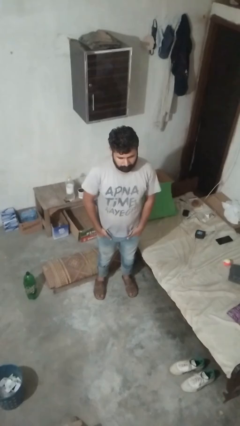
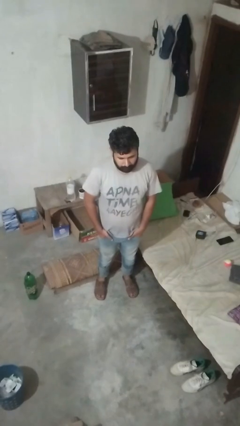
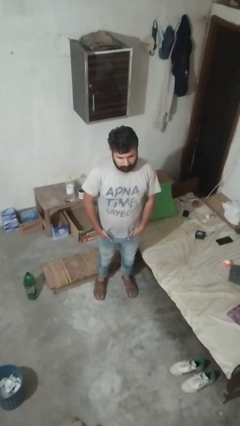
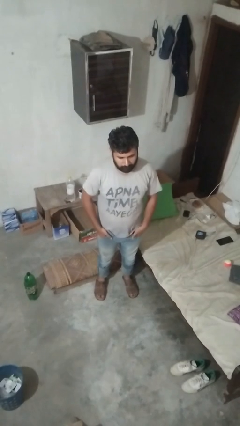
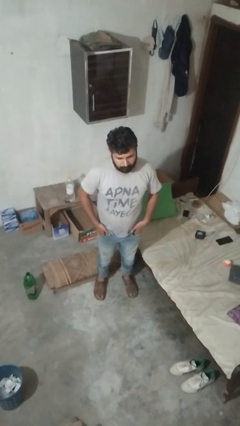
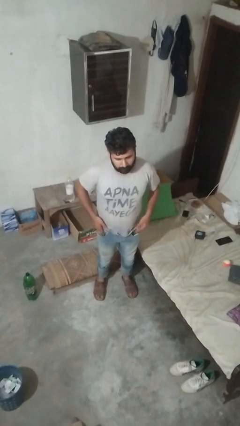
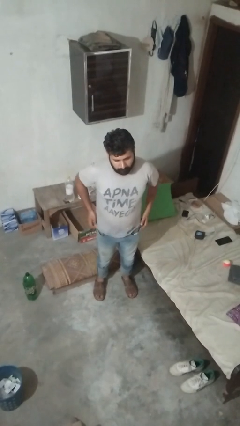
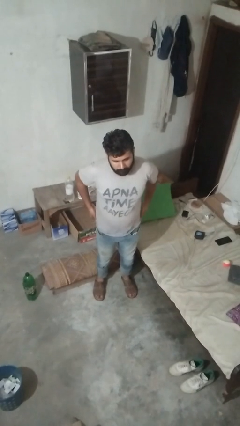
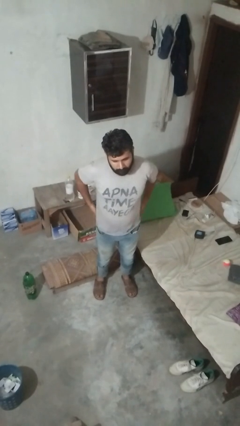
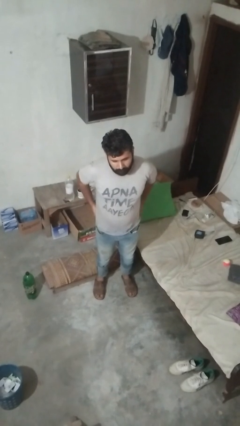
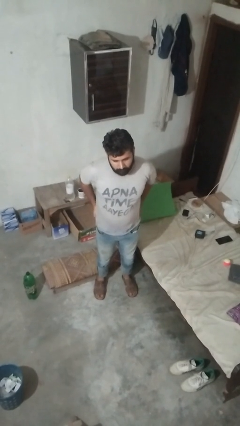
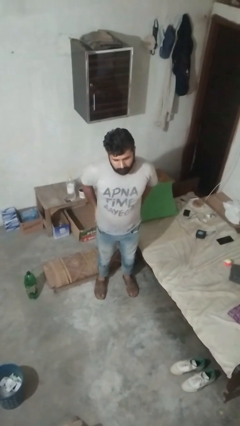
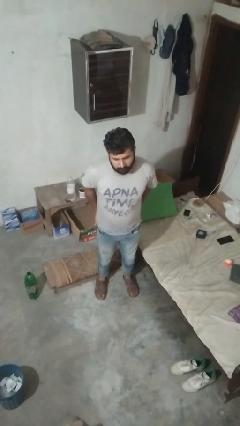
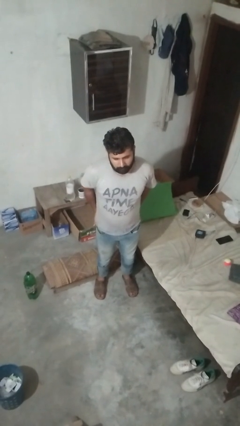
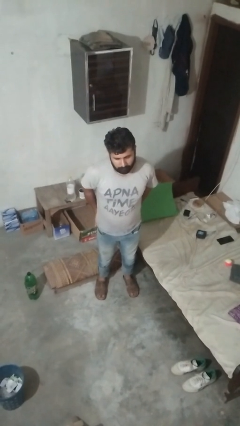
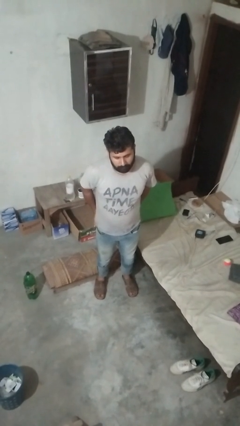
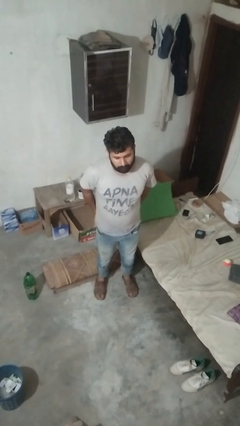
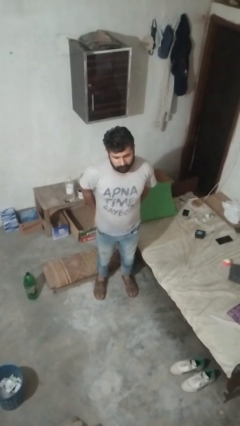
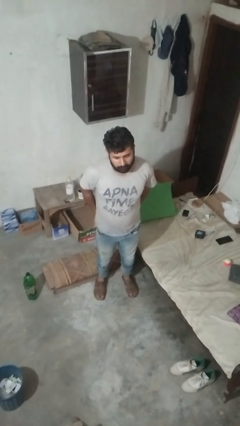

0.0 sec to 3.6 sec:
person puts hands in back pockets

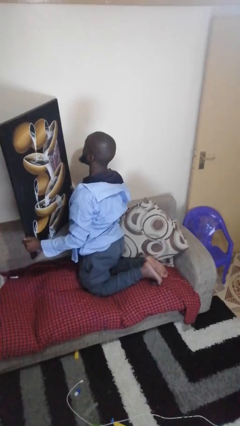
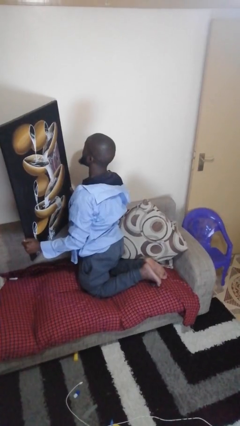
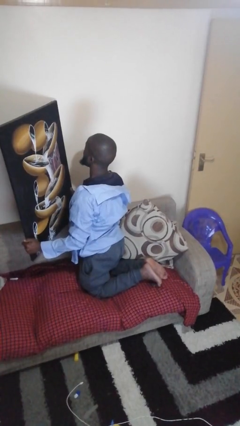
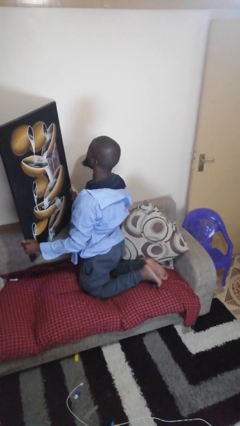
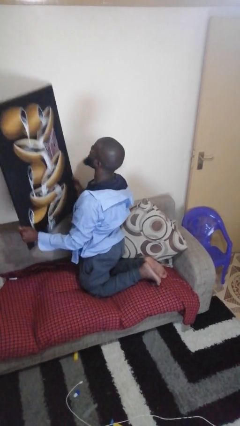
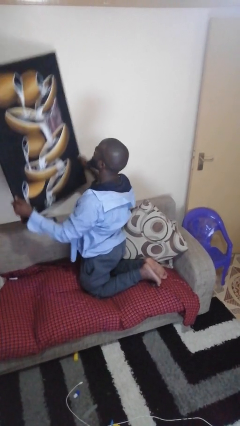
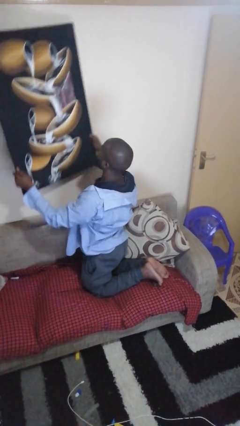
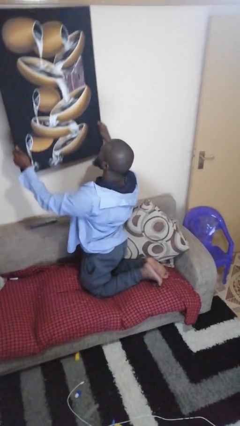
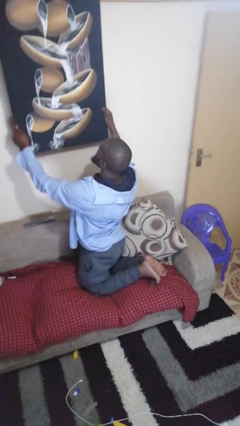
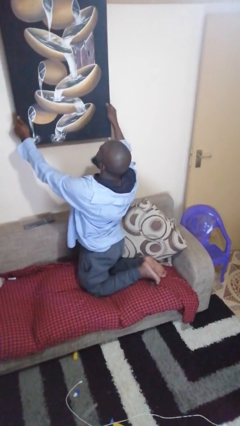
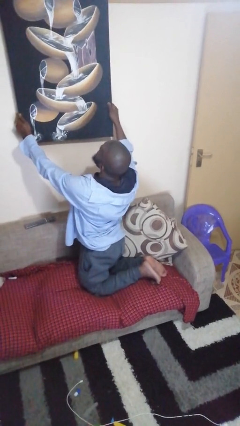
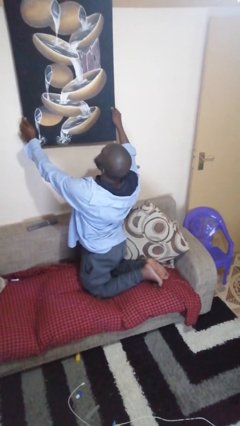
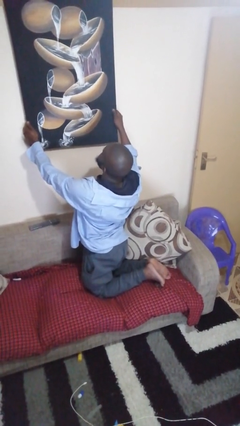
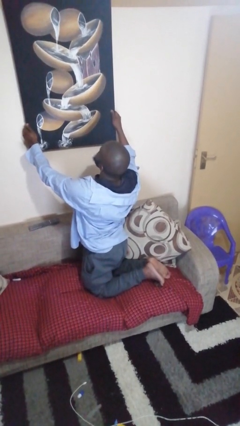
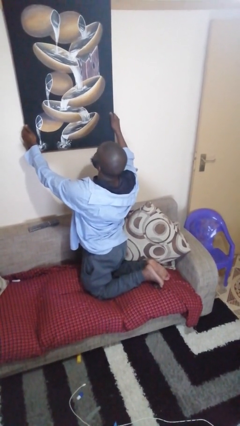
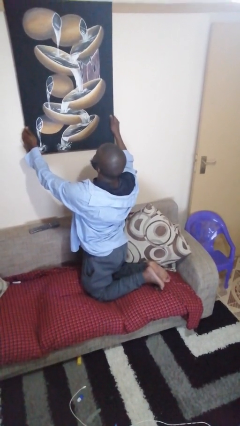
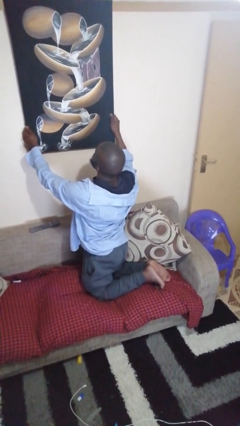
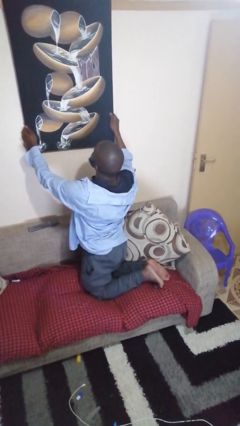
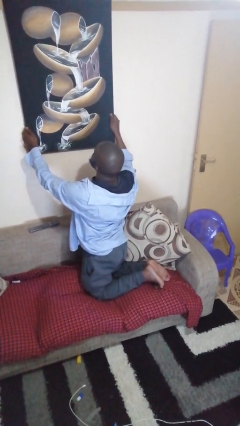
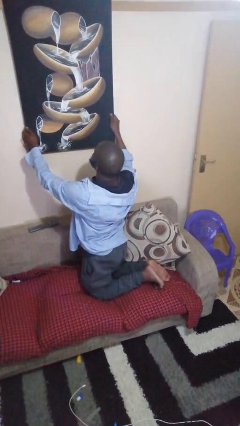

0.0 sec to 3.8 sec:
person puts up picture frame

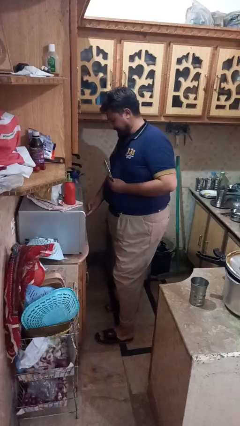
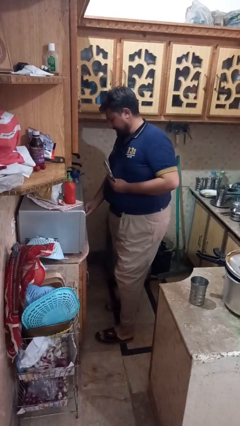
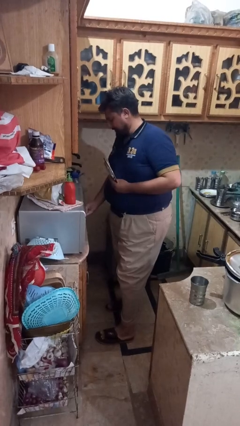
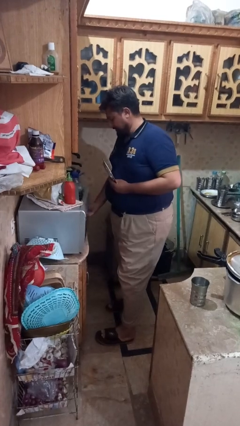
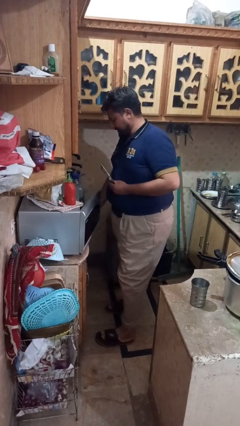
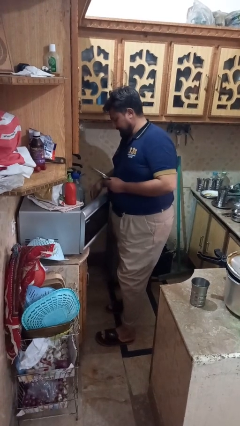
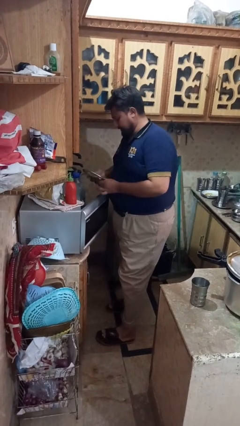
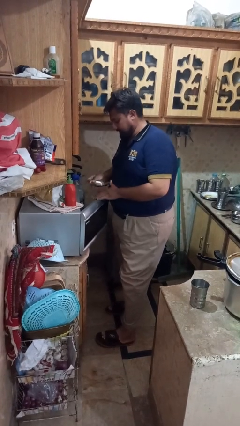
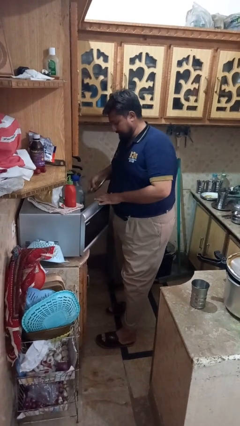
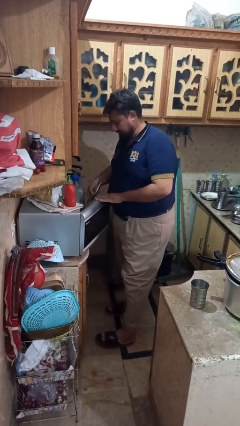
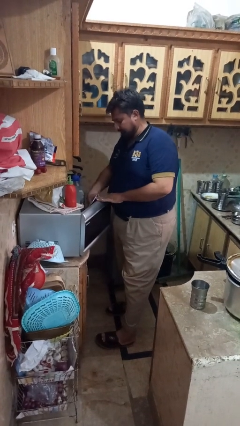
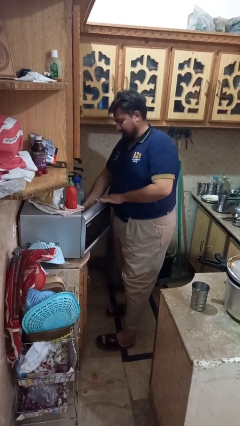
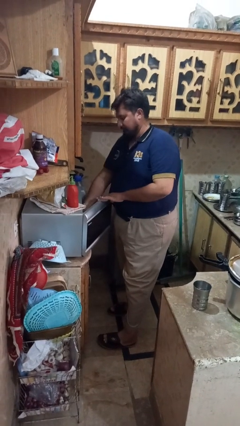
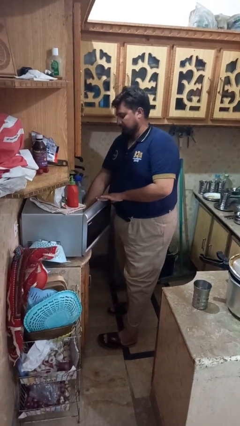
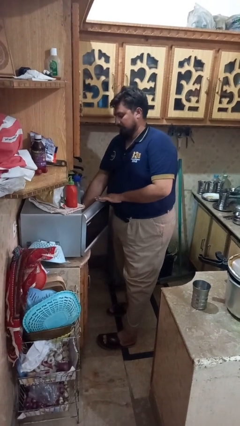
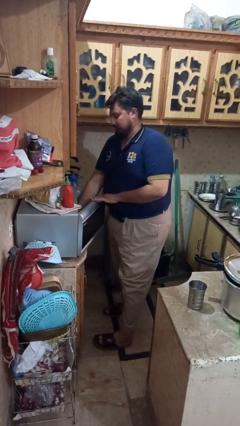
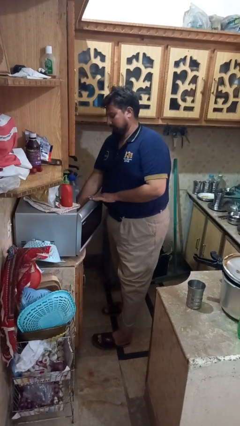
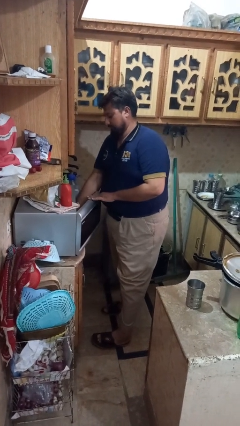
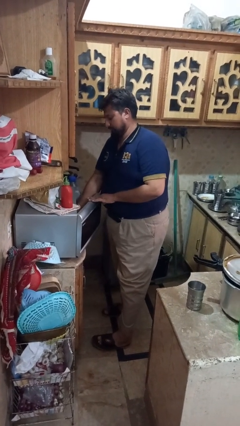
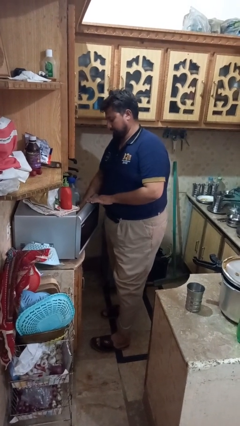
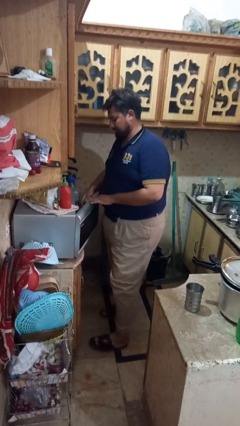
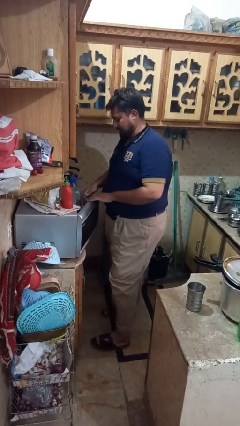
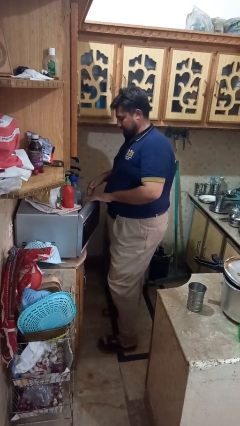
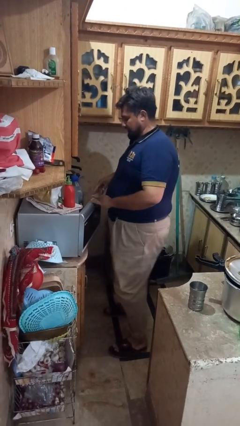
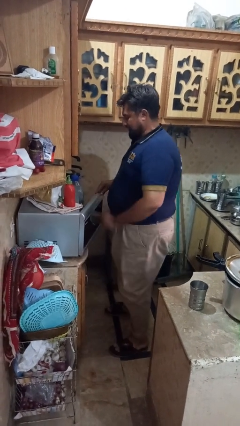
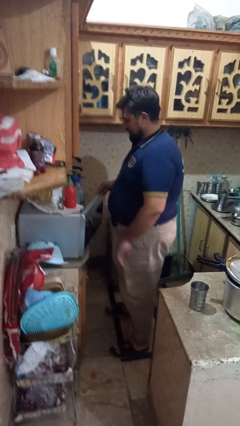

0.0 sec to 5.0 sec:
person puts object into microwave

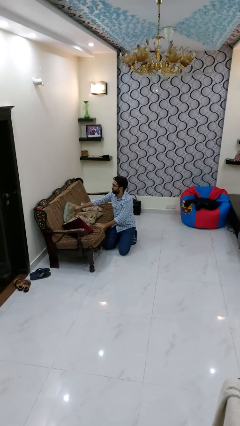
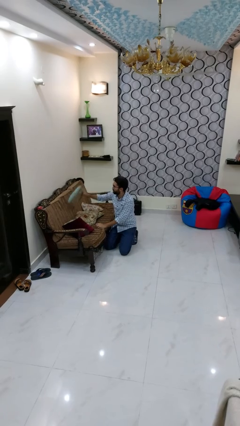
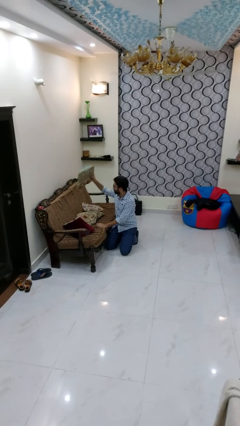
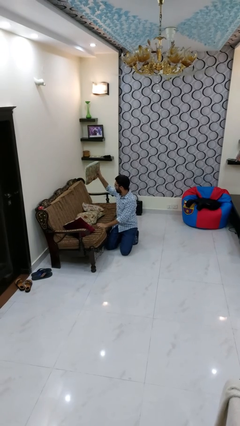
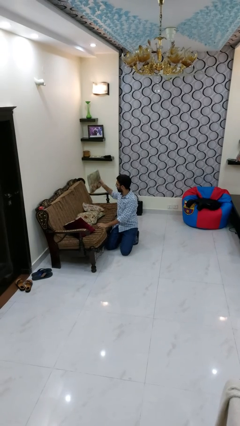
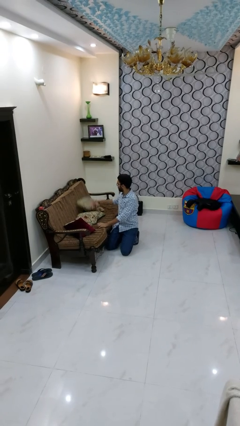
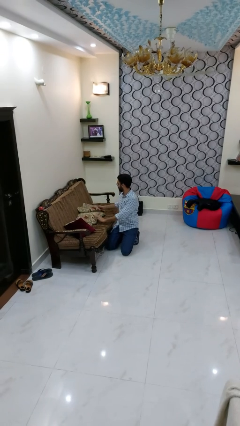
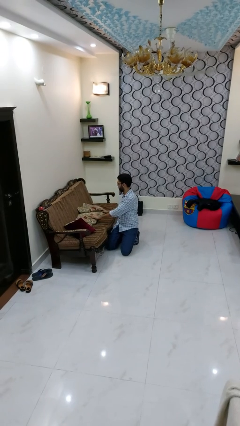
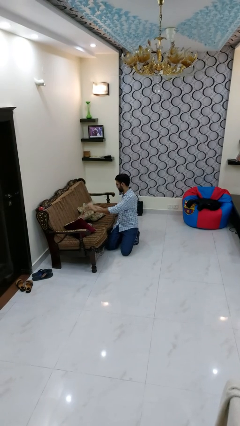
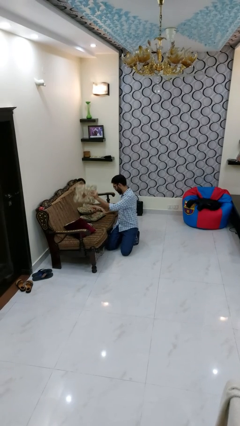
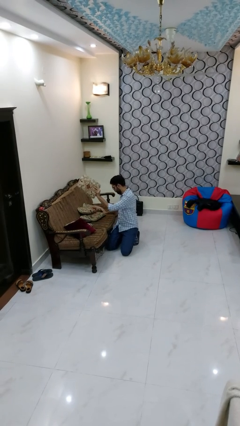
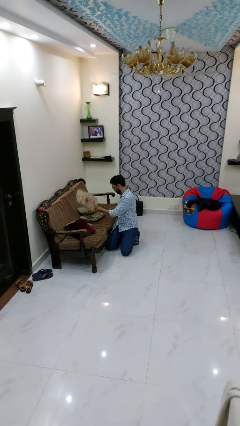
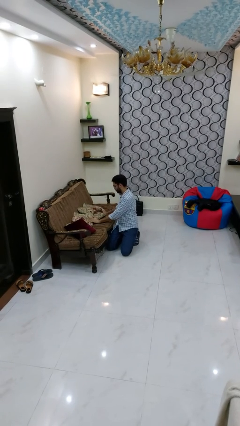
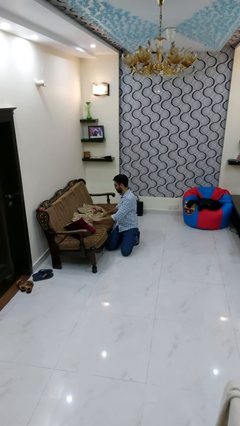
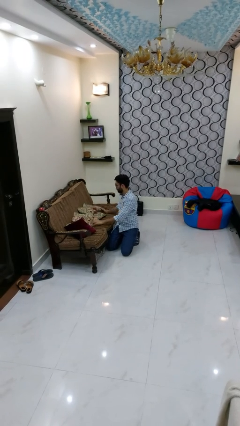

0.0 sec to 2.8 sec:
person searches in couch

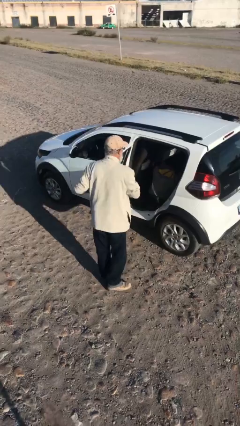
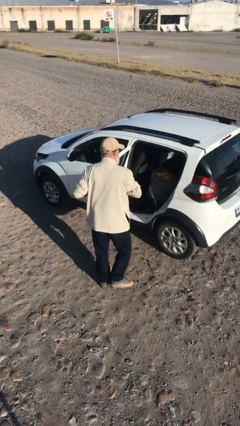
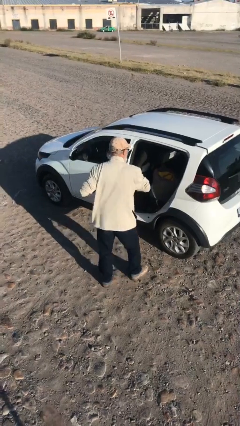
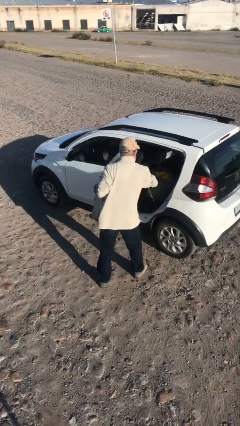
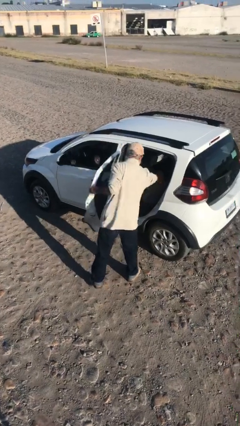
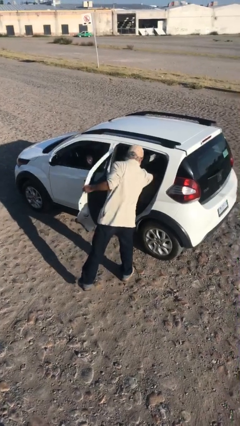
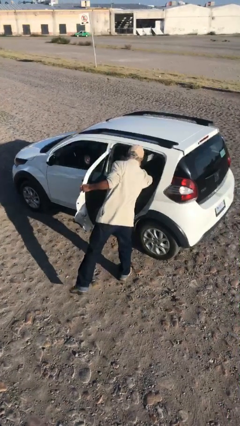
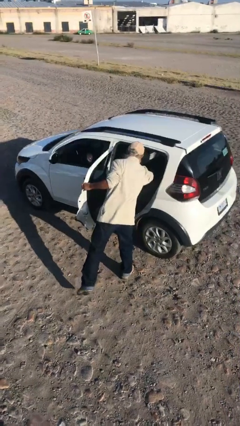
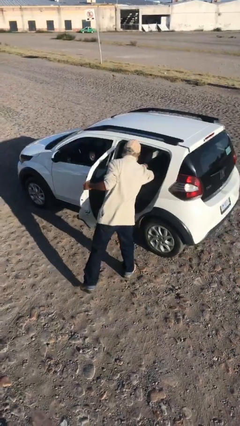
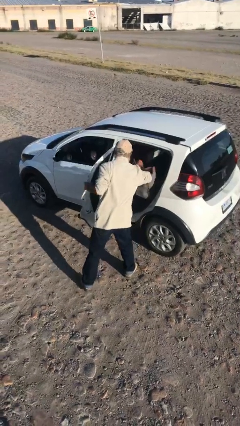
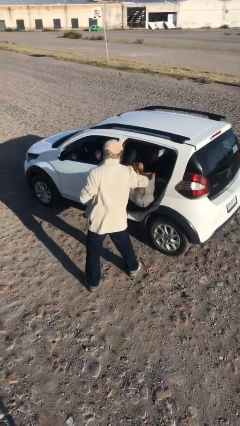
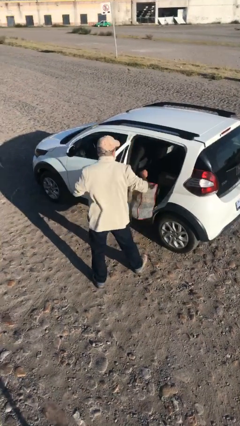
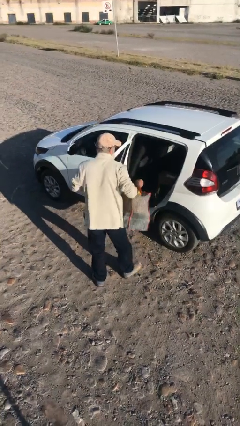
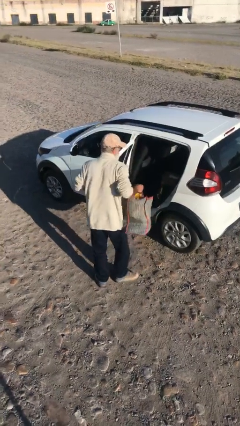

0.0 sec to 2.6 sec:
person unloads car
